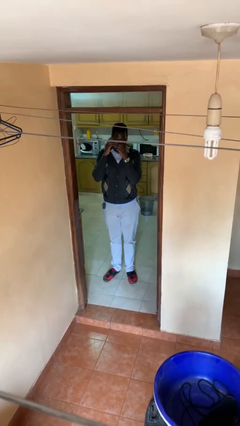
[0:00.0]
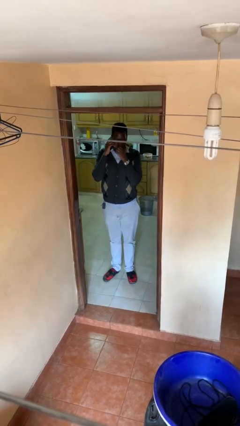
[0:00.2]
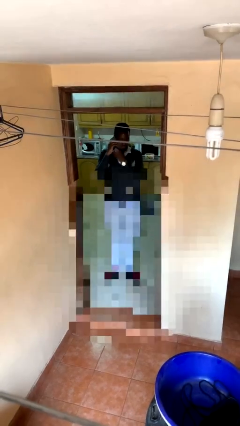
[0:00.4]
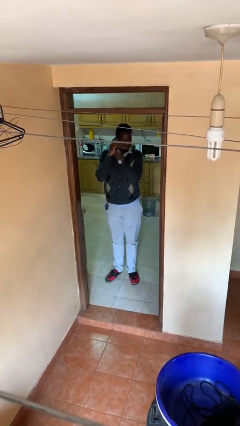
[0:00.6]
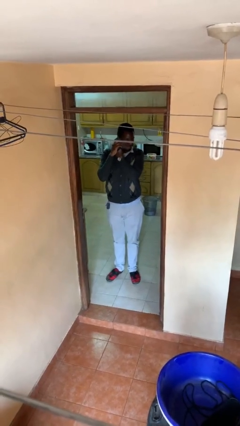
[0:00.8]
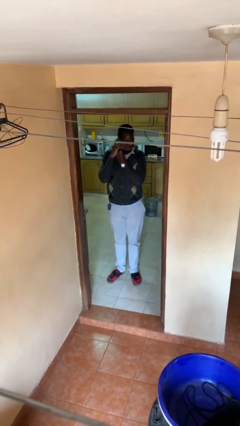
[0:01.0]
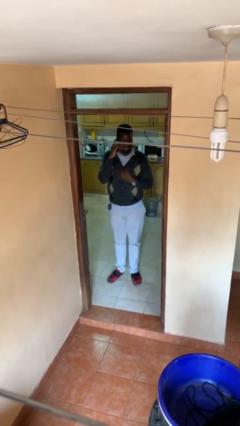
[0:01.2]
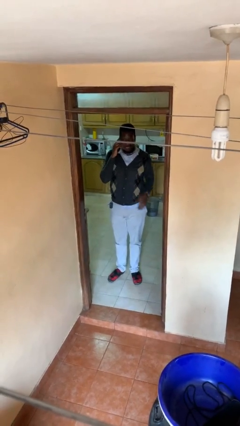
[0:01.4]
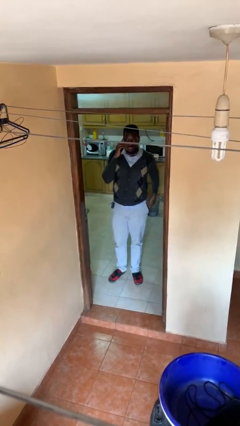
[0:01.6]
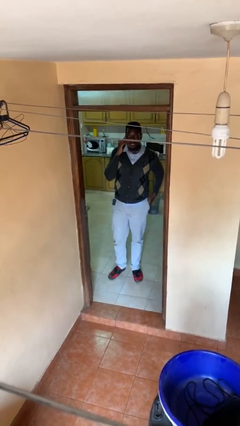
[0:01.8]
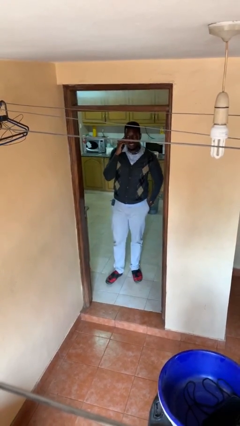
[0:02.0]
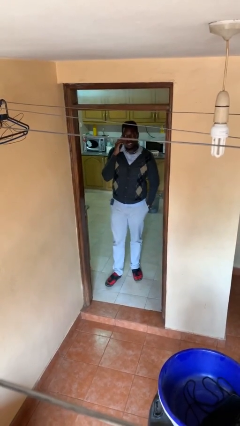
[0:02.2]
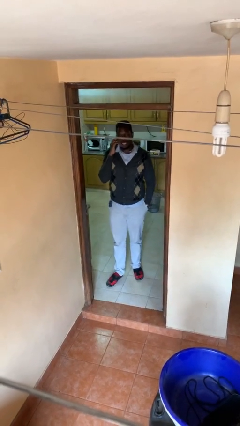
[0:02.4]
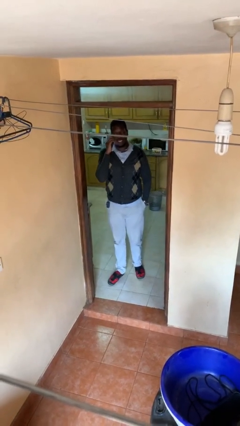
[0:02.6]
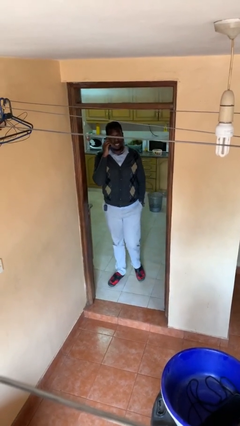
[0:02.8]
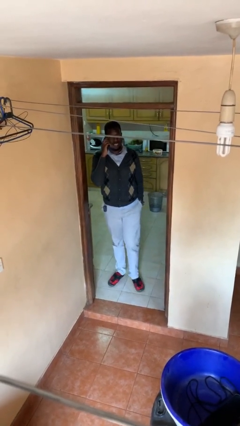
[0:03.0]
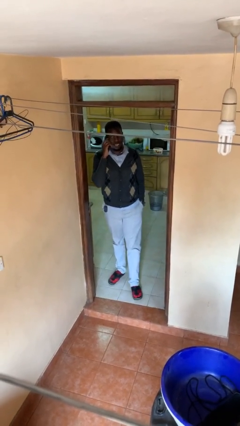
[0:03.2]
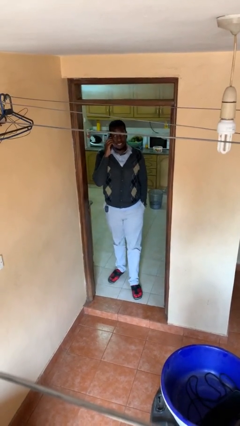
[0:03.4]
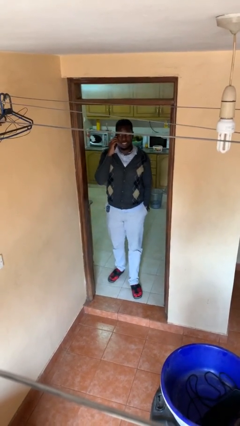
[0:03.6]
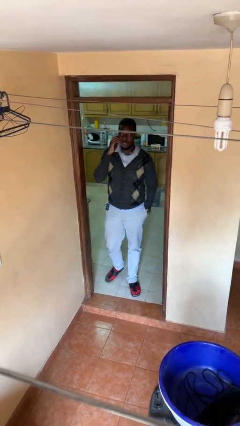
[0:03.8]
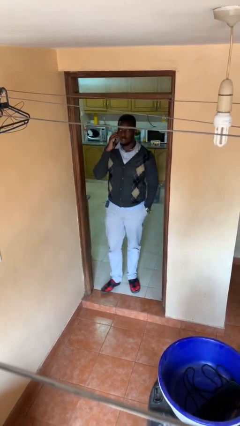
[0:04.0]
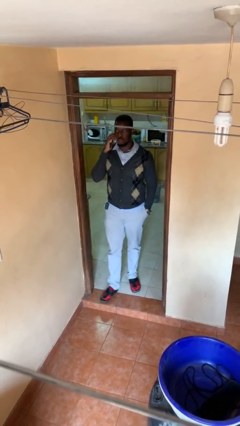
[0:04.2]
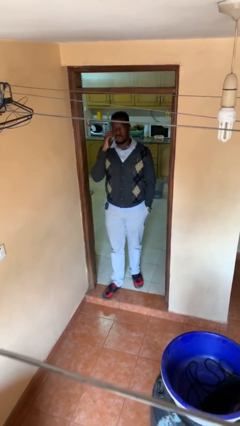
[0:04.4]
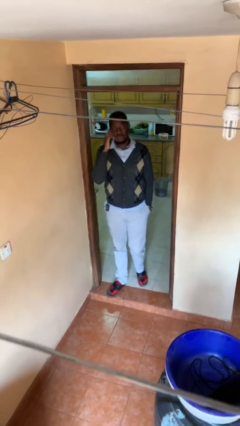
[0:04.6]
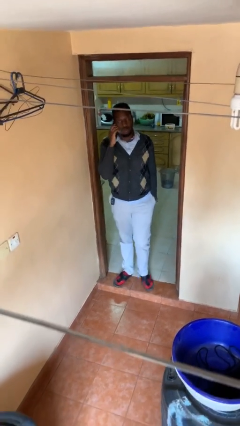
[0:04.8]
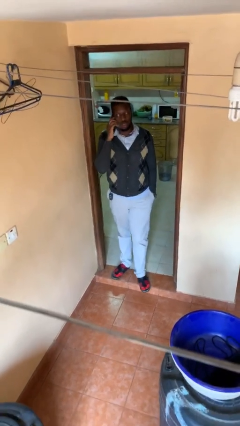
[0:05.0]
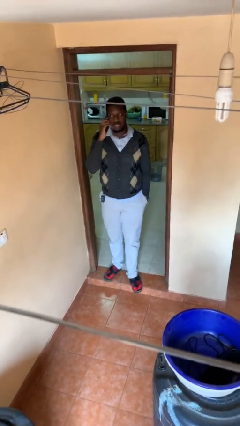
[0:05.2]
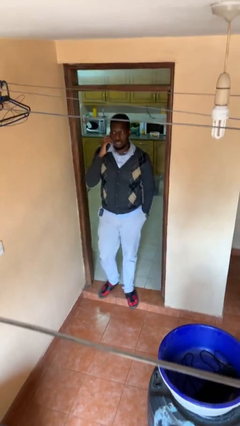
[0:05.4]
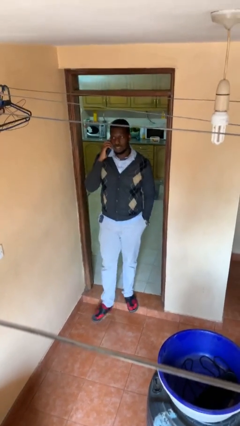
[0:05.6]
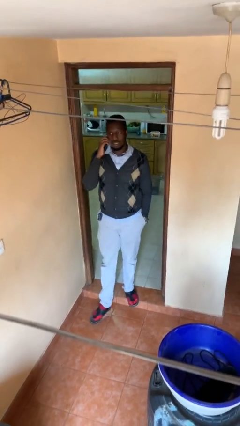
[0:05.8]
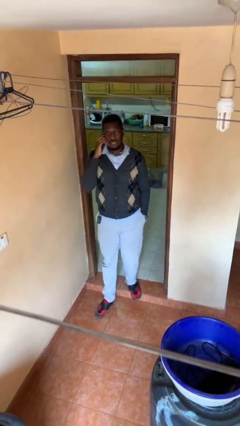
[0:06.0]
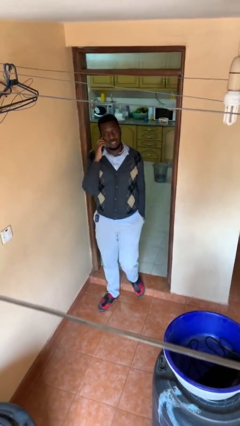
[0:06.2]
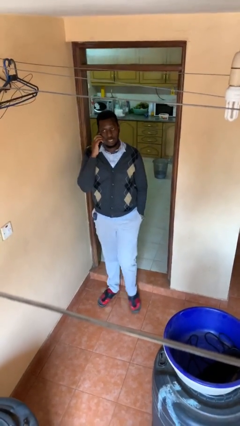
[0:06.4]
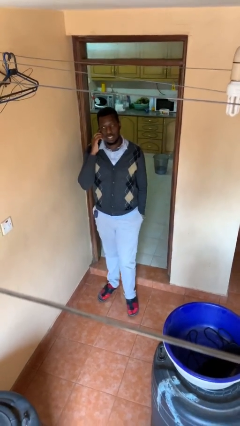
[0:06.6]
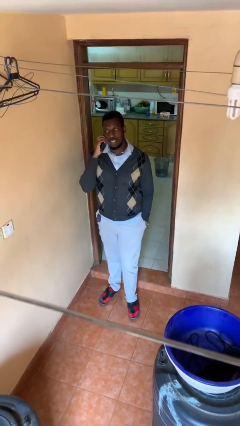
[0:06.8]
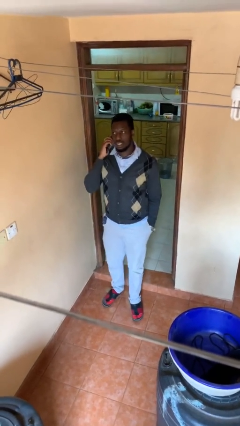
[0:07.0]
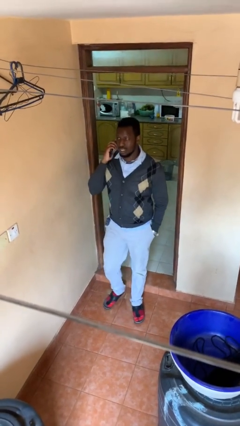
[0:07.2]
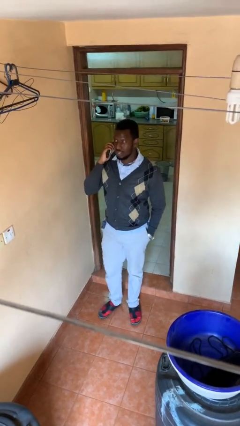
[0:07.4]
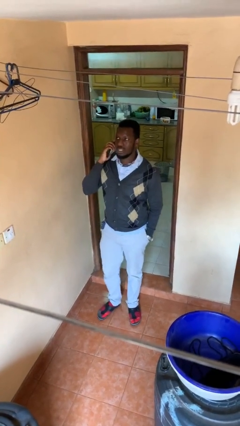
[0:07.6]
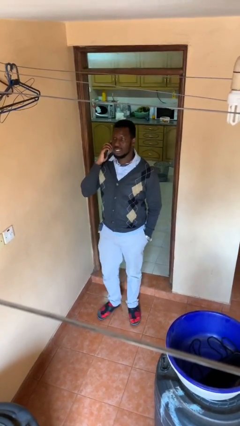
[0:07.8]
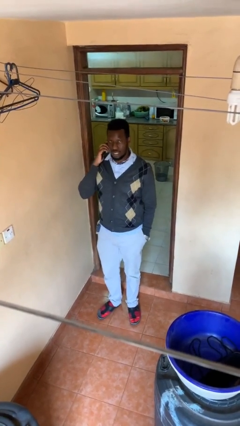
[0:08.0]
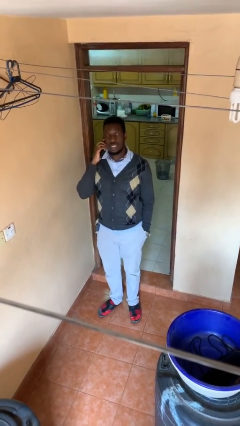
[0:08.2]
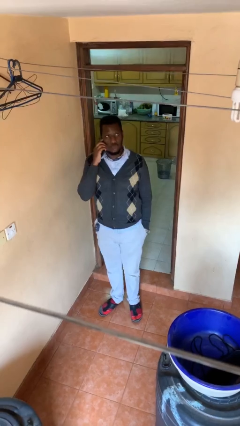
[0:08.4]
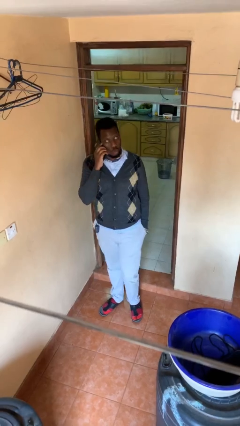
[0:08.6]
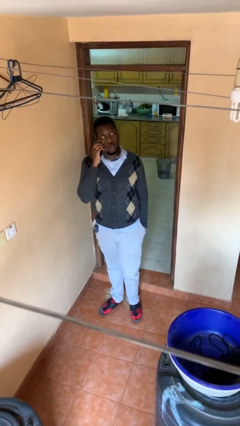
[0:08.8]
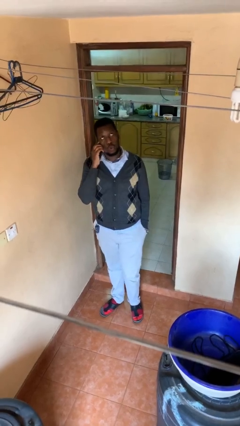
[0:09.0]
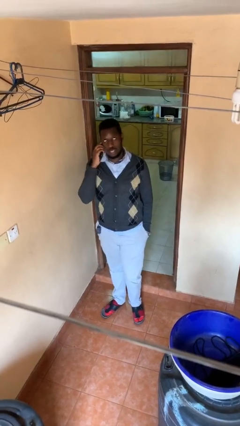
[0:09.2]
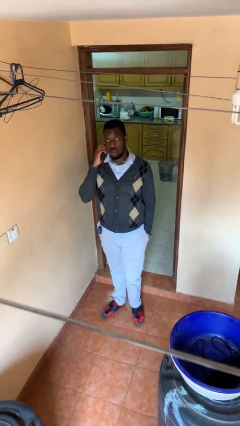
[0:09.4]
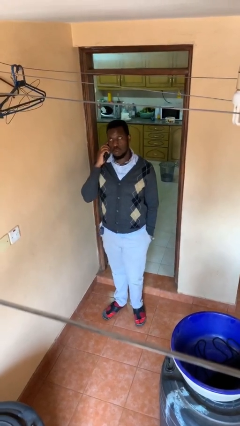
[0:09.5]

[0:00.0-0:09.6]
person enters scene through structure

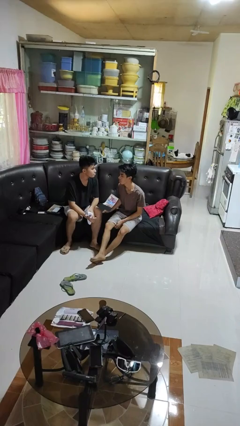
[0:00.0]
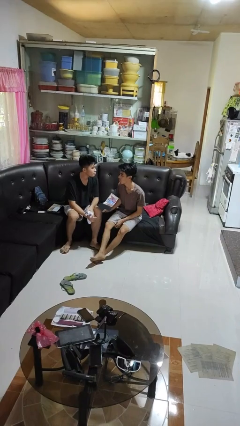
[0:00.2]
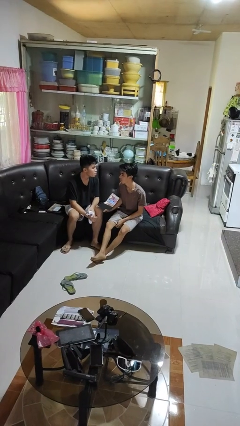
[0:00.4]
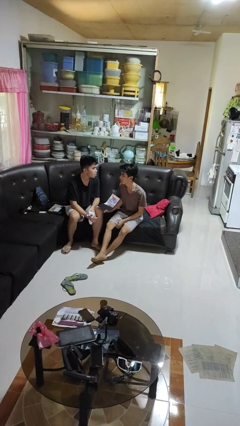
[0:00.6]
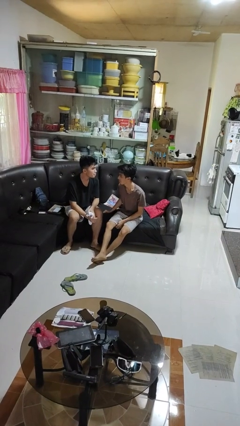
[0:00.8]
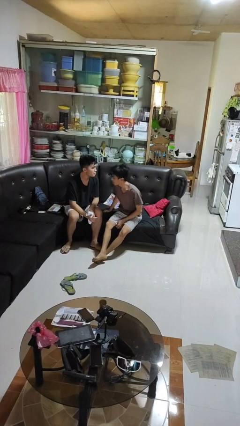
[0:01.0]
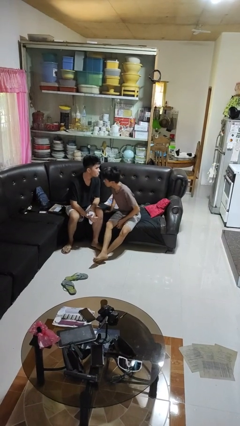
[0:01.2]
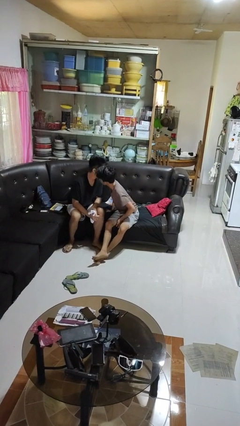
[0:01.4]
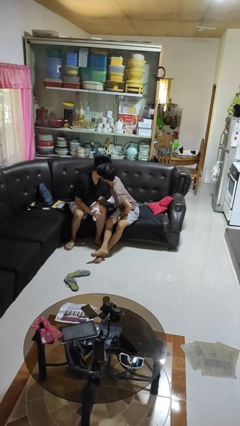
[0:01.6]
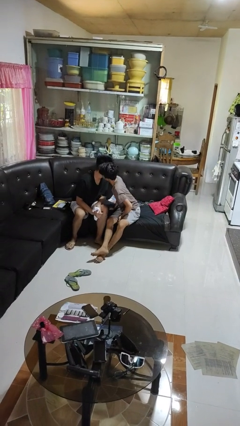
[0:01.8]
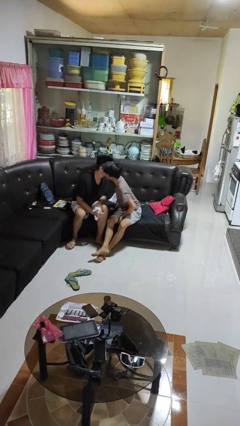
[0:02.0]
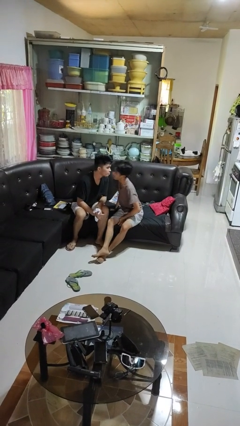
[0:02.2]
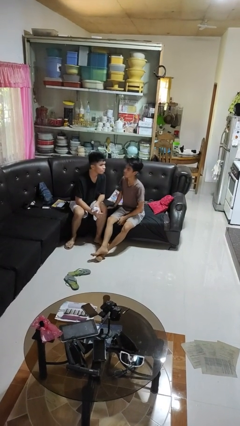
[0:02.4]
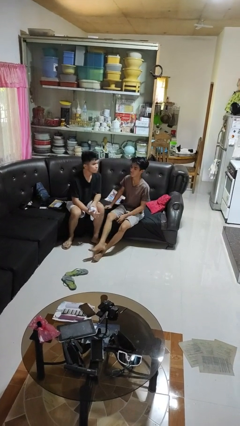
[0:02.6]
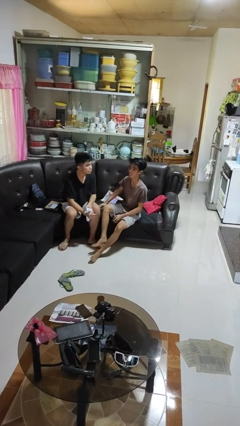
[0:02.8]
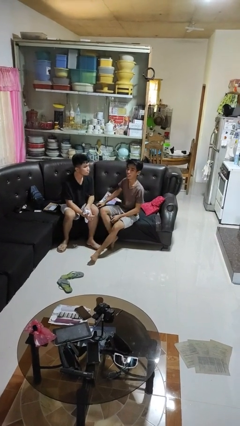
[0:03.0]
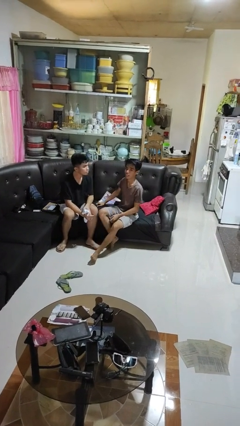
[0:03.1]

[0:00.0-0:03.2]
person kisses cheek of person

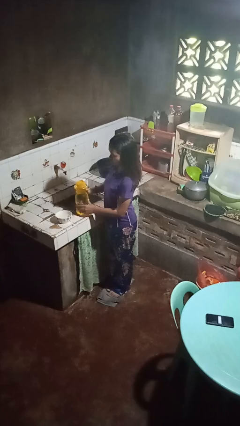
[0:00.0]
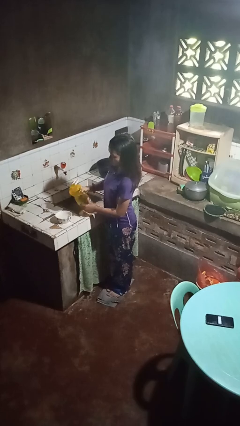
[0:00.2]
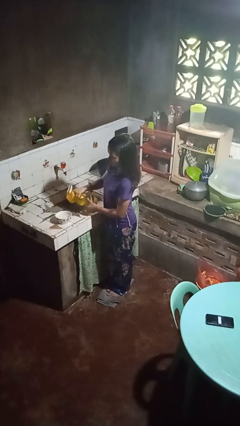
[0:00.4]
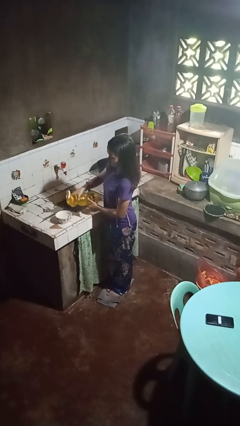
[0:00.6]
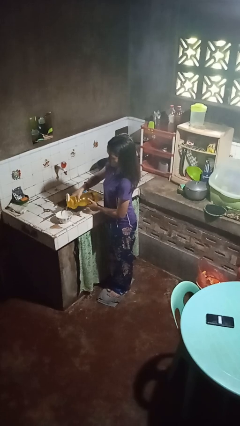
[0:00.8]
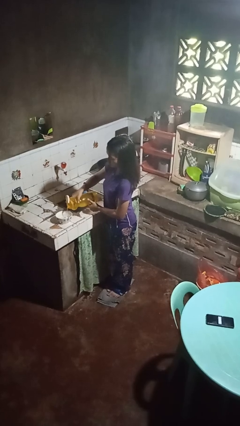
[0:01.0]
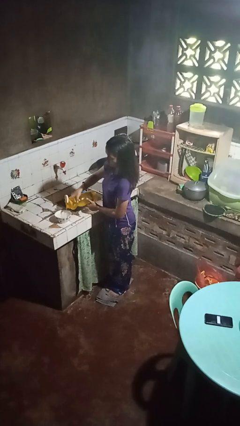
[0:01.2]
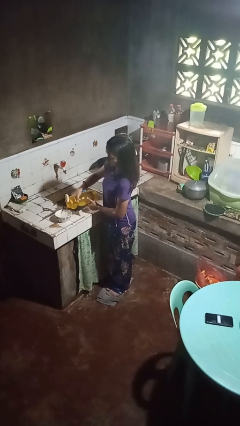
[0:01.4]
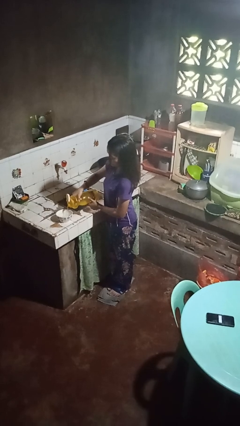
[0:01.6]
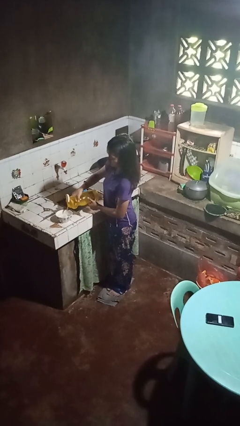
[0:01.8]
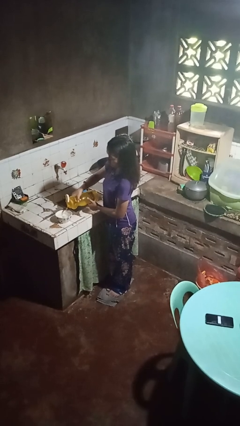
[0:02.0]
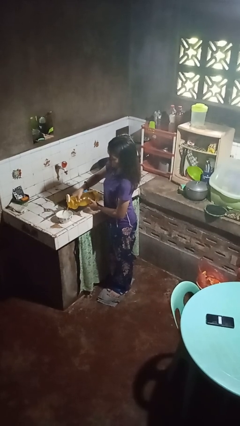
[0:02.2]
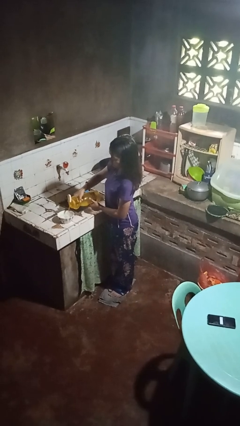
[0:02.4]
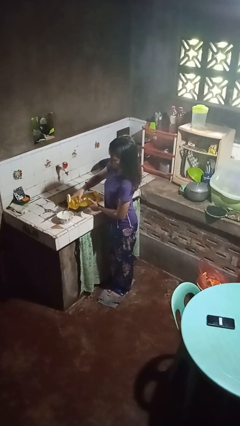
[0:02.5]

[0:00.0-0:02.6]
person pours into bowl

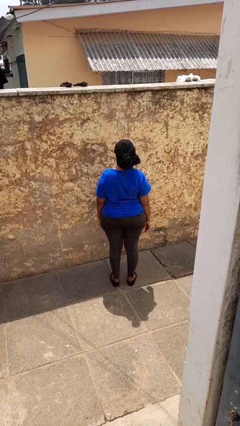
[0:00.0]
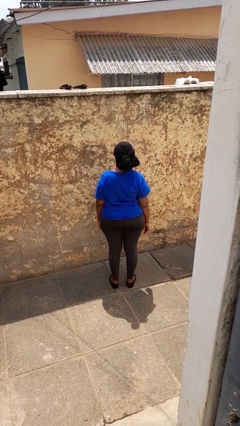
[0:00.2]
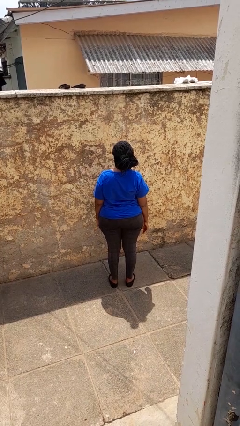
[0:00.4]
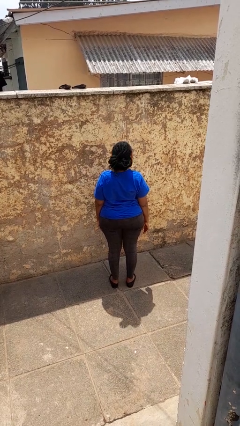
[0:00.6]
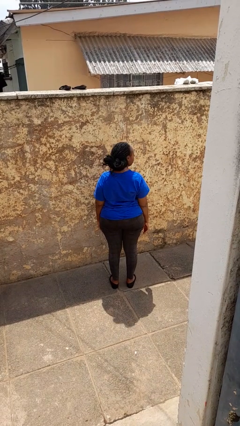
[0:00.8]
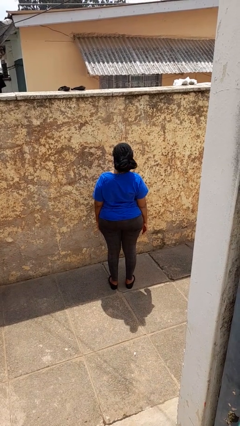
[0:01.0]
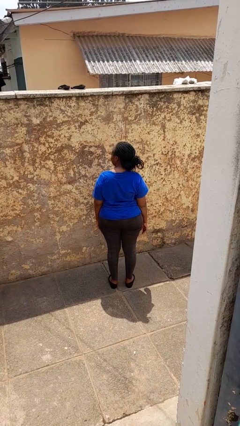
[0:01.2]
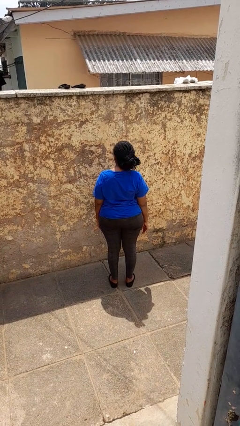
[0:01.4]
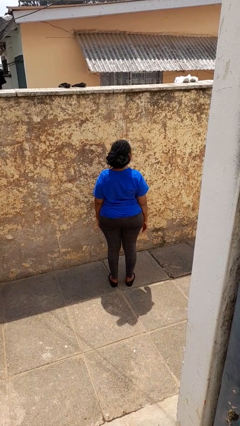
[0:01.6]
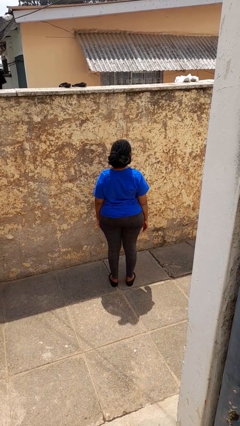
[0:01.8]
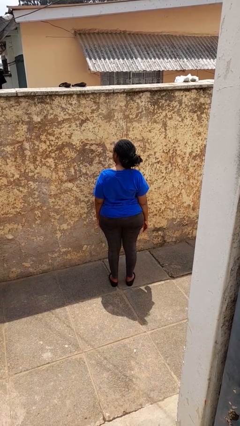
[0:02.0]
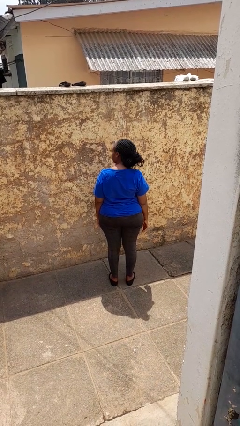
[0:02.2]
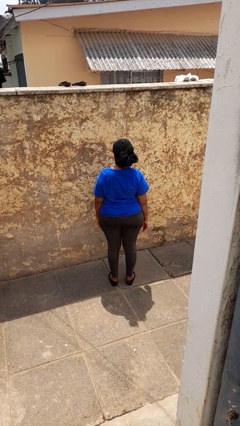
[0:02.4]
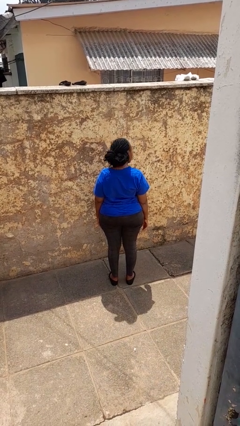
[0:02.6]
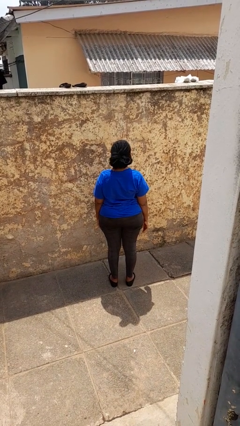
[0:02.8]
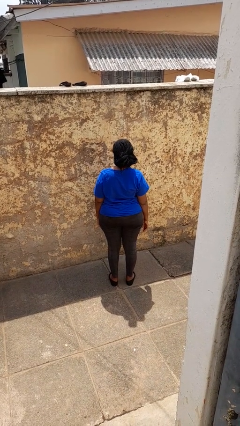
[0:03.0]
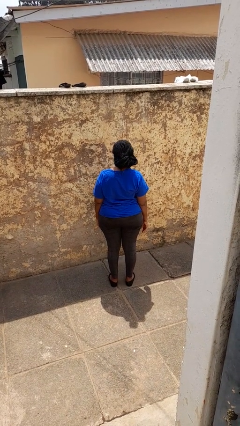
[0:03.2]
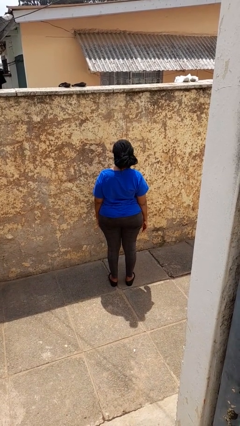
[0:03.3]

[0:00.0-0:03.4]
person shakes head
